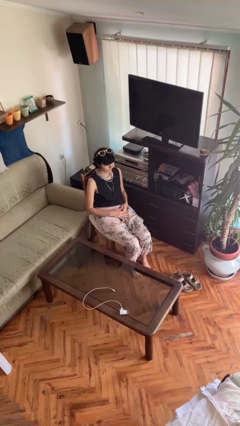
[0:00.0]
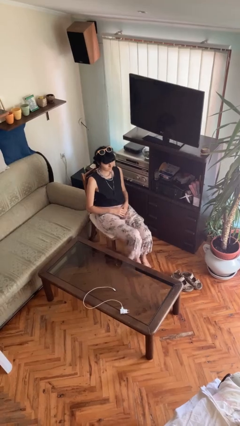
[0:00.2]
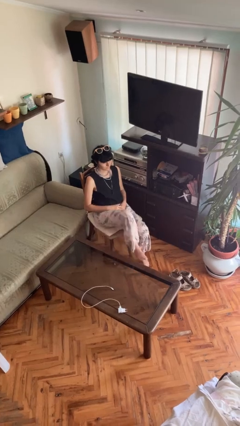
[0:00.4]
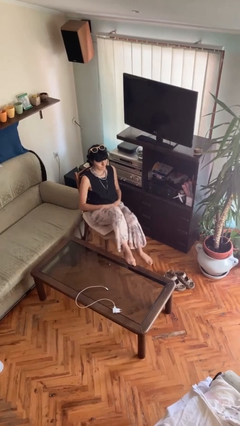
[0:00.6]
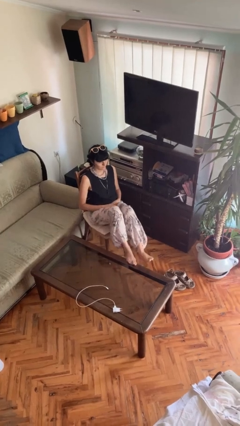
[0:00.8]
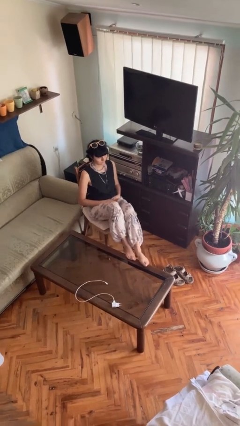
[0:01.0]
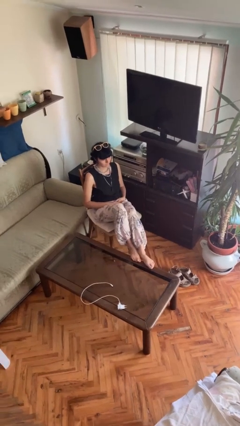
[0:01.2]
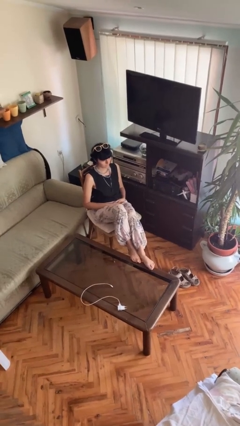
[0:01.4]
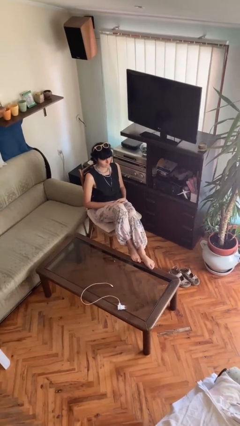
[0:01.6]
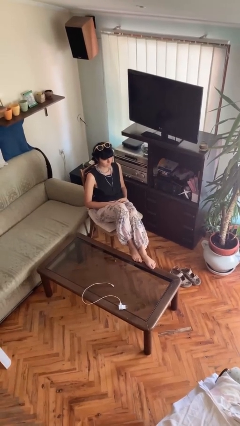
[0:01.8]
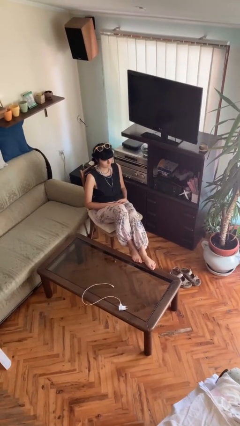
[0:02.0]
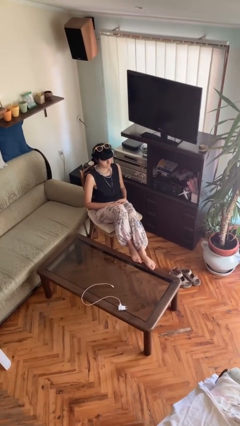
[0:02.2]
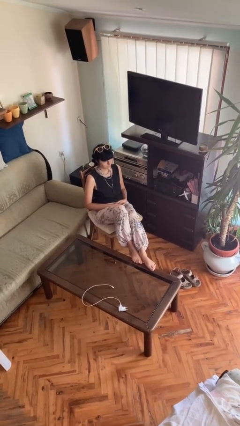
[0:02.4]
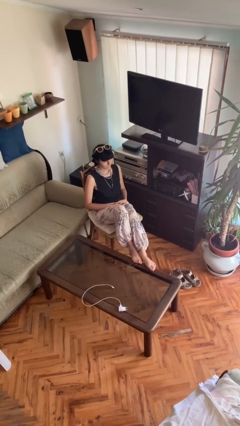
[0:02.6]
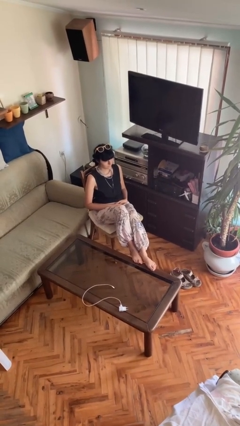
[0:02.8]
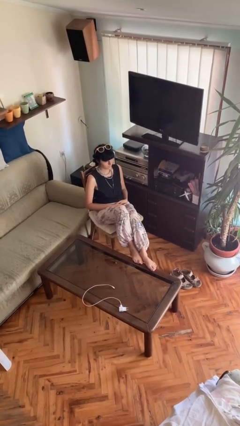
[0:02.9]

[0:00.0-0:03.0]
person puts feet up

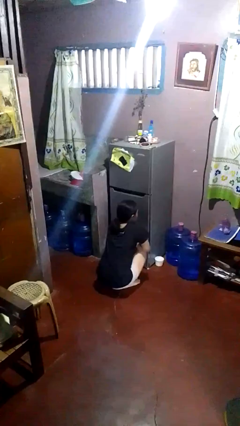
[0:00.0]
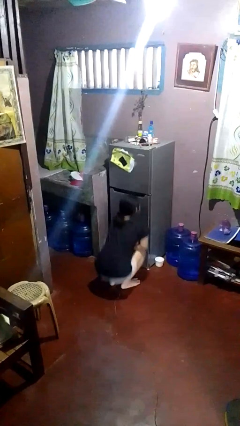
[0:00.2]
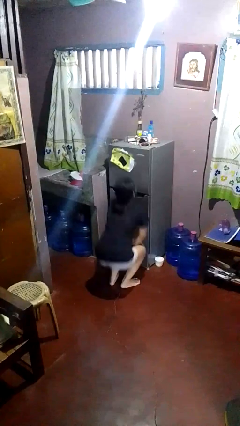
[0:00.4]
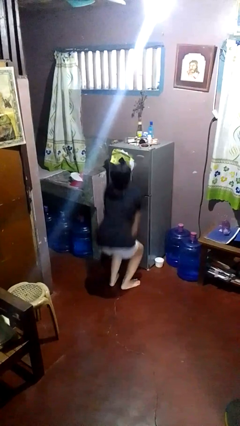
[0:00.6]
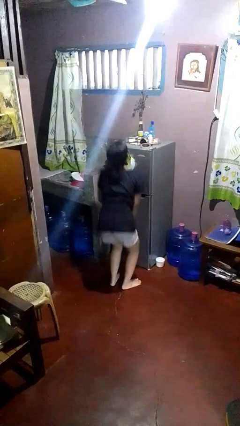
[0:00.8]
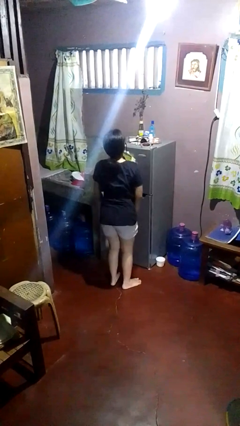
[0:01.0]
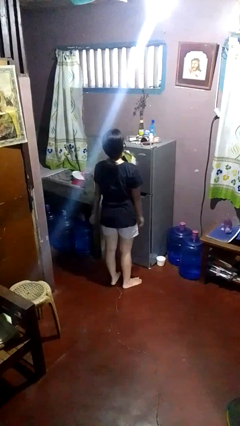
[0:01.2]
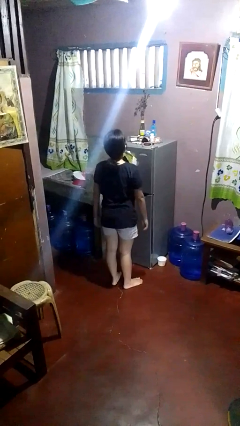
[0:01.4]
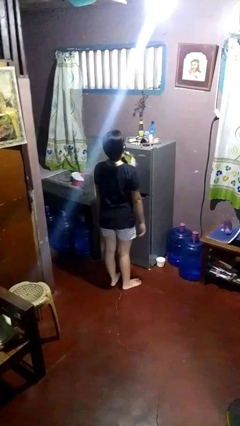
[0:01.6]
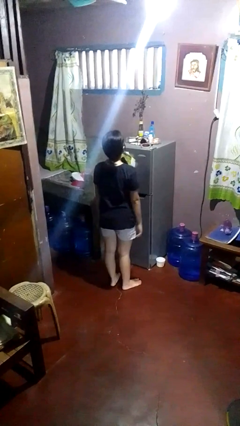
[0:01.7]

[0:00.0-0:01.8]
person stands up

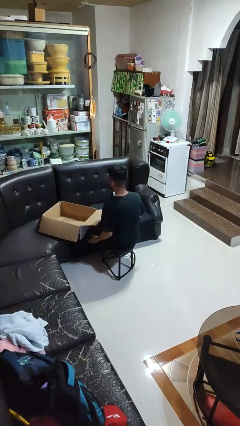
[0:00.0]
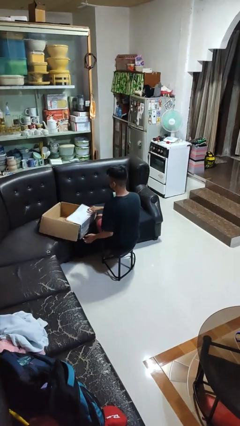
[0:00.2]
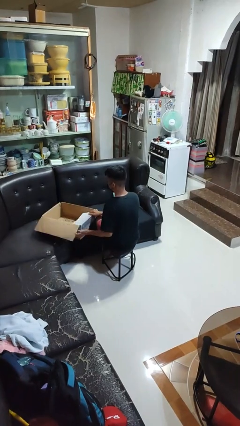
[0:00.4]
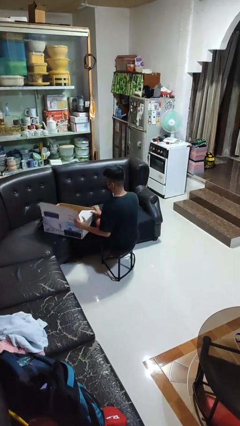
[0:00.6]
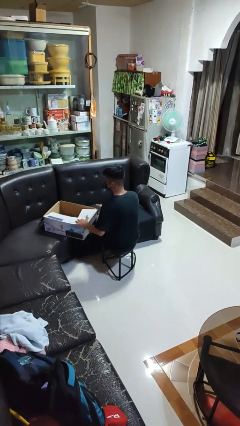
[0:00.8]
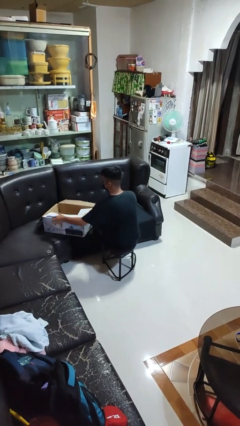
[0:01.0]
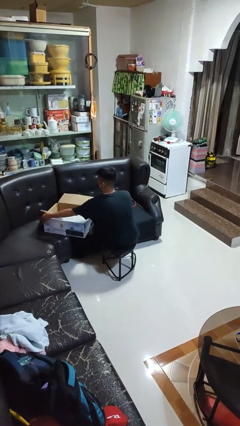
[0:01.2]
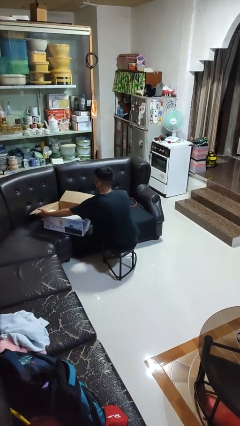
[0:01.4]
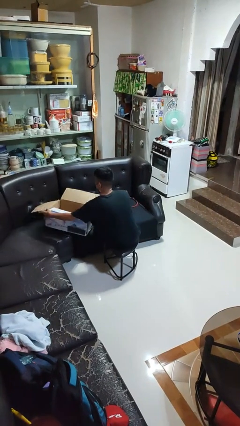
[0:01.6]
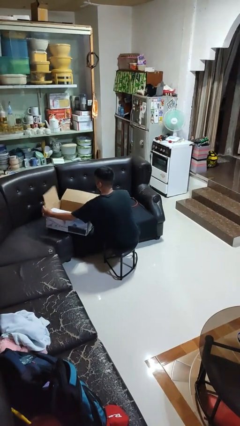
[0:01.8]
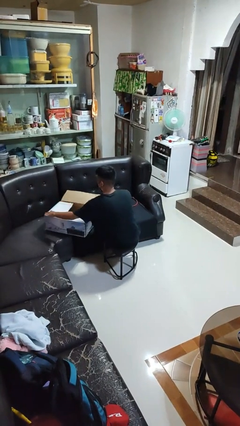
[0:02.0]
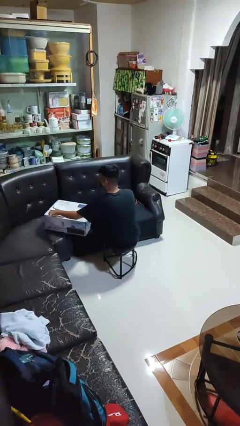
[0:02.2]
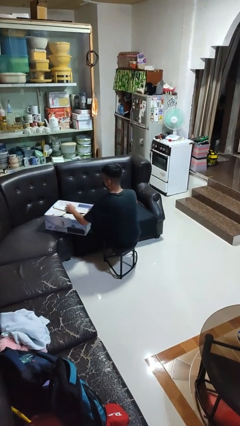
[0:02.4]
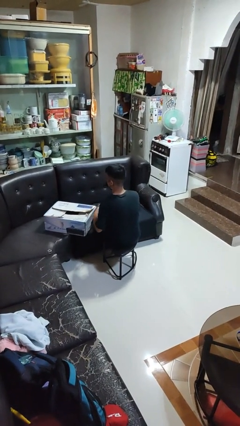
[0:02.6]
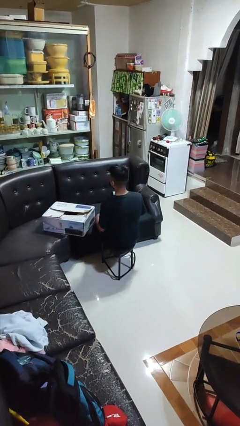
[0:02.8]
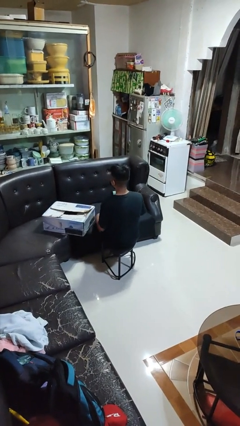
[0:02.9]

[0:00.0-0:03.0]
person closes box

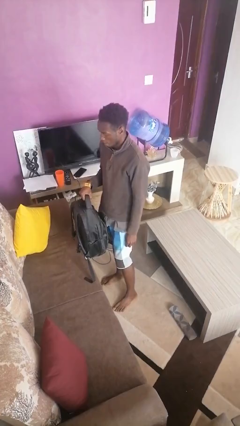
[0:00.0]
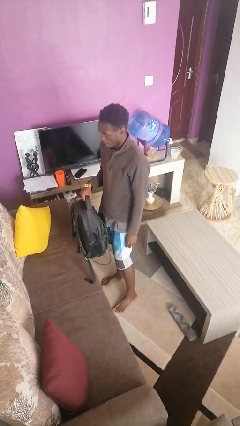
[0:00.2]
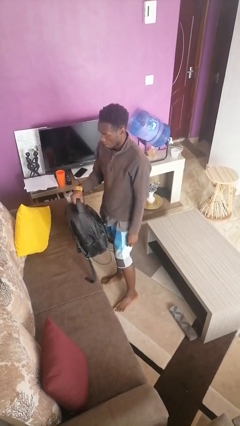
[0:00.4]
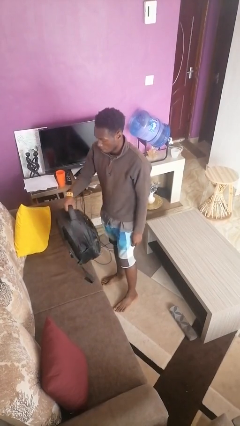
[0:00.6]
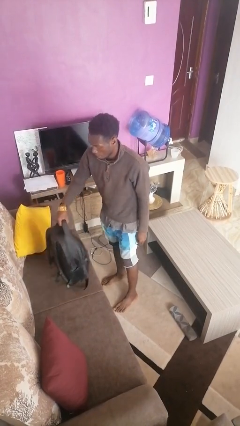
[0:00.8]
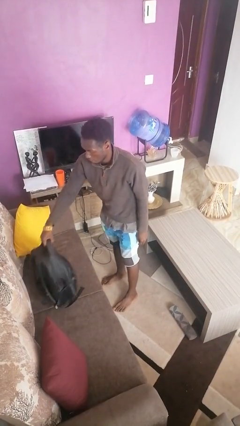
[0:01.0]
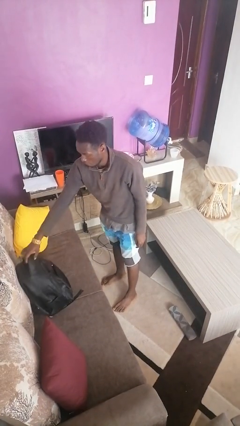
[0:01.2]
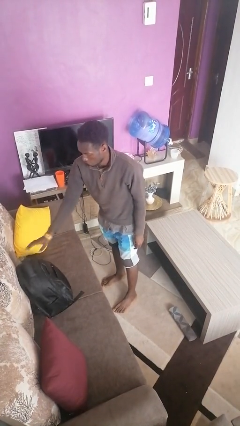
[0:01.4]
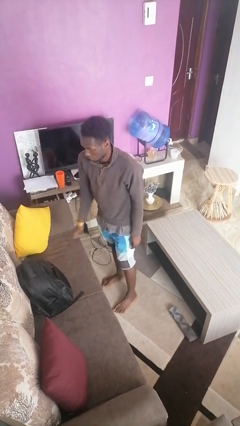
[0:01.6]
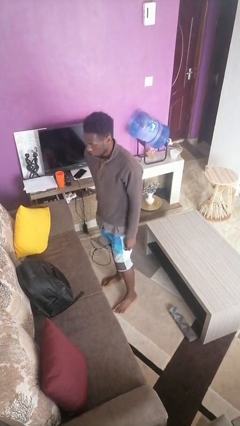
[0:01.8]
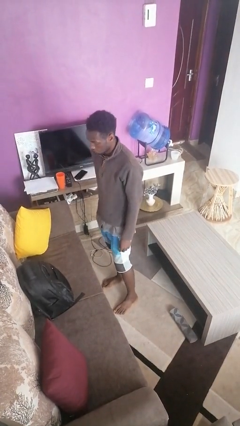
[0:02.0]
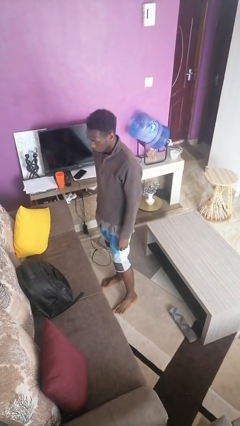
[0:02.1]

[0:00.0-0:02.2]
person puts down object on couch

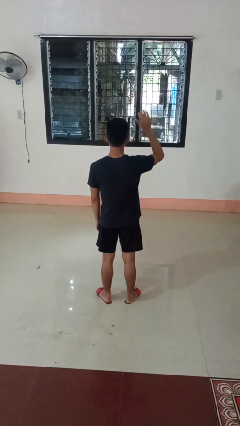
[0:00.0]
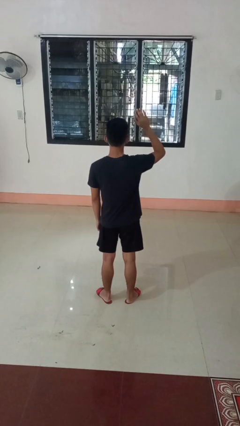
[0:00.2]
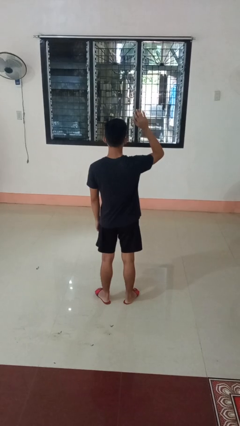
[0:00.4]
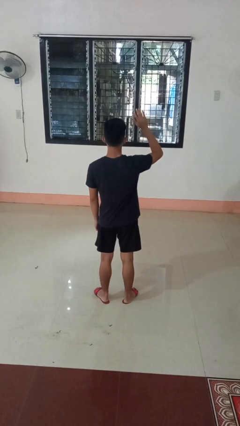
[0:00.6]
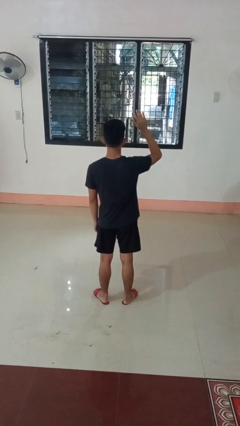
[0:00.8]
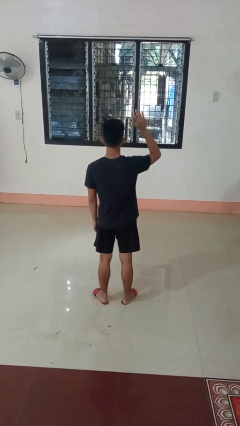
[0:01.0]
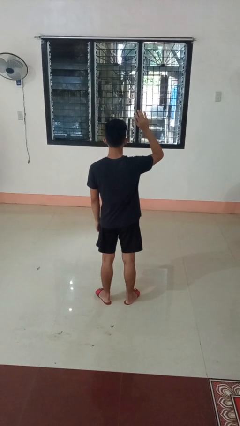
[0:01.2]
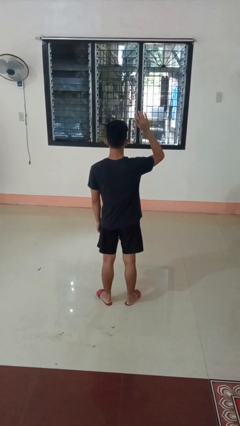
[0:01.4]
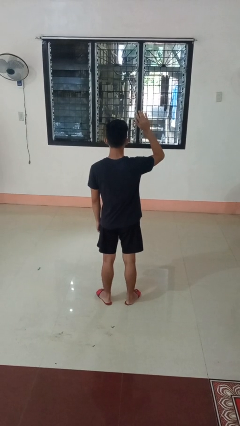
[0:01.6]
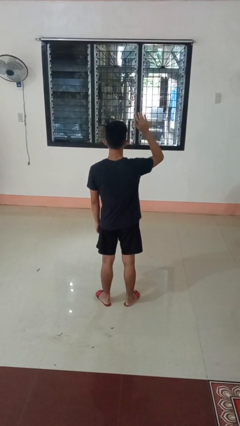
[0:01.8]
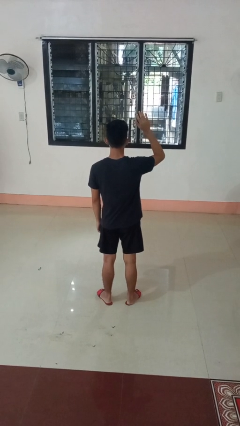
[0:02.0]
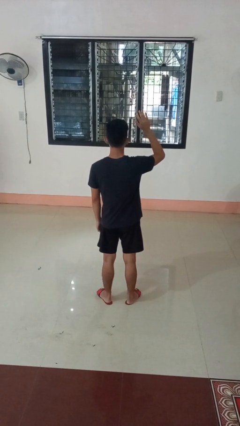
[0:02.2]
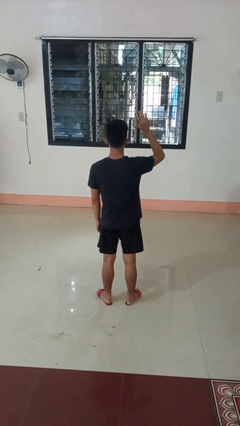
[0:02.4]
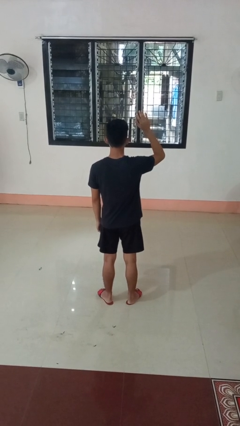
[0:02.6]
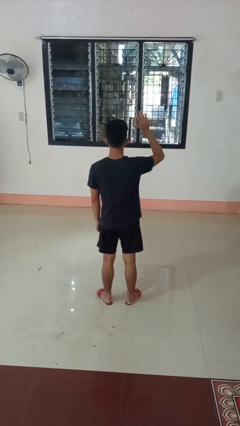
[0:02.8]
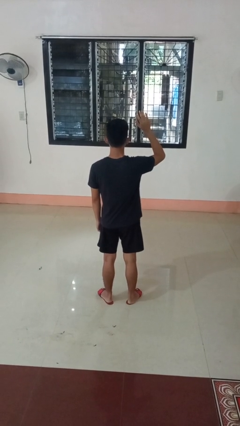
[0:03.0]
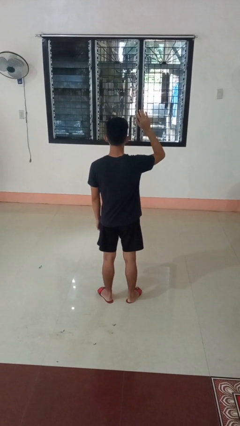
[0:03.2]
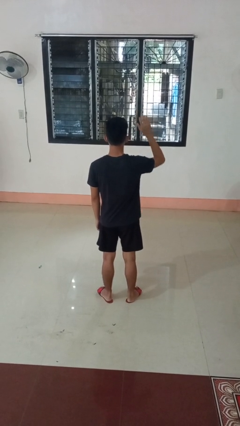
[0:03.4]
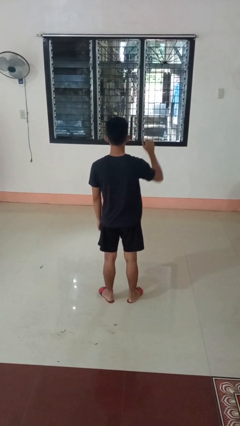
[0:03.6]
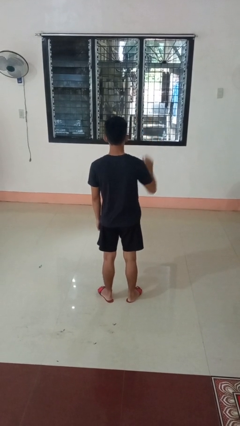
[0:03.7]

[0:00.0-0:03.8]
person gestures raise hand

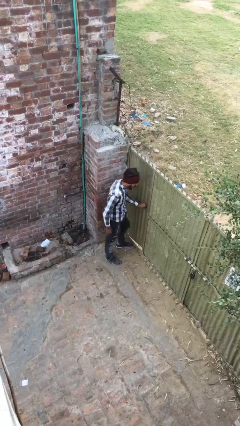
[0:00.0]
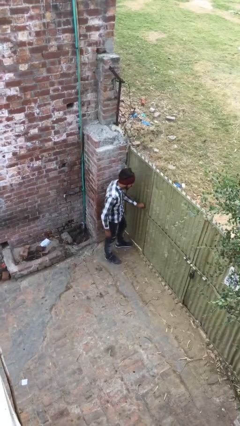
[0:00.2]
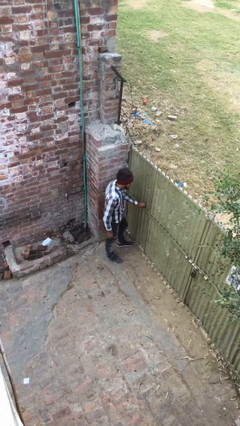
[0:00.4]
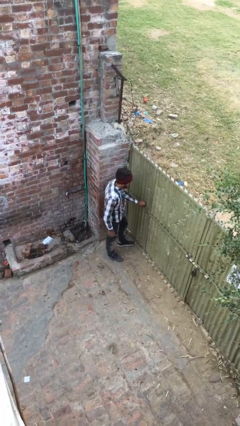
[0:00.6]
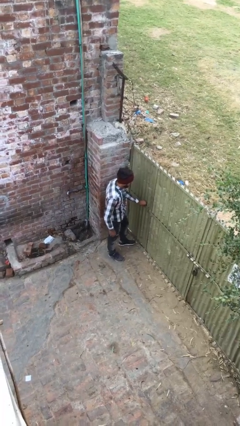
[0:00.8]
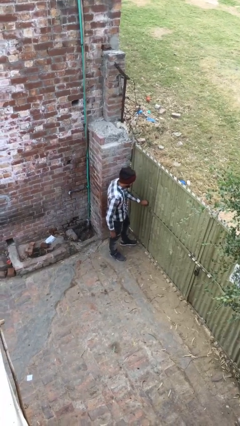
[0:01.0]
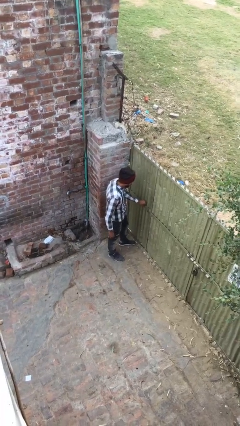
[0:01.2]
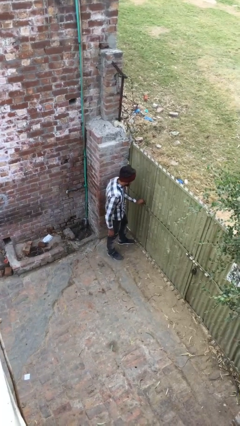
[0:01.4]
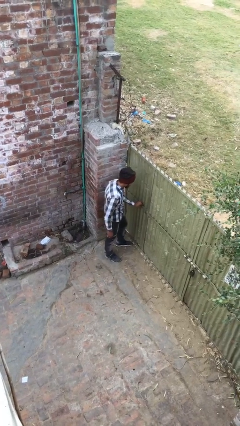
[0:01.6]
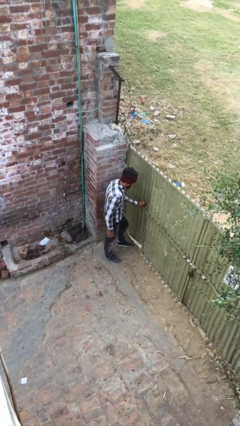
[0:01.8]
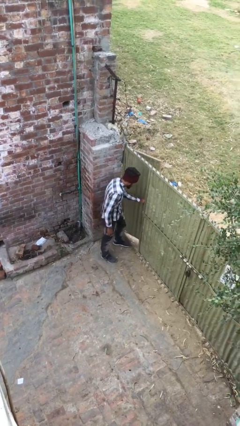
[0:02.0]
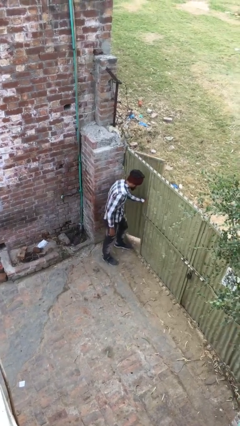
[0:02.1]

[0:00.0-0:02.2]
person closes facility door

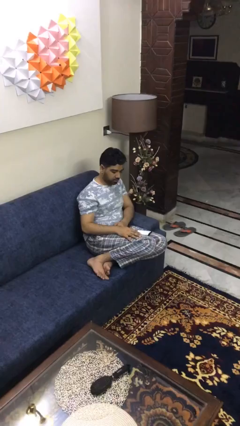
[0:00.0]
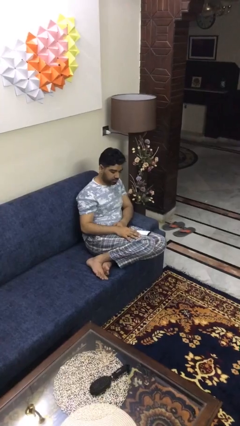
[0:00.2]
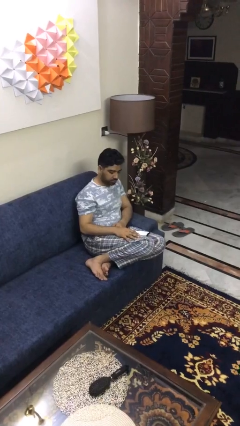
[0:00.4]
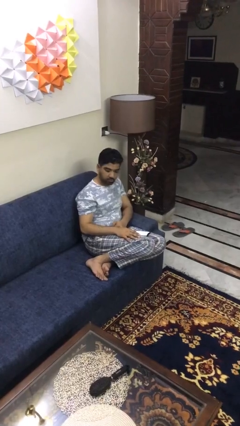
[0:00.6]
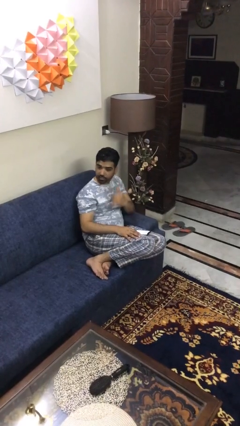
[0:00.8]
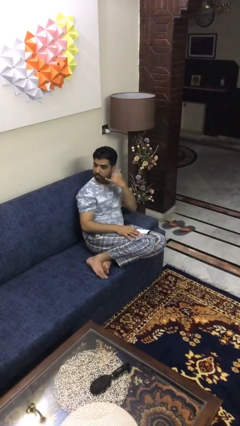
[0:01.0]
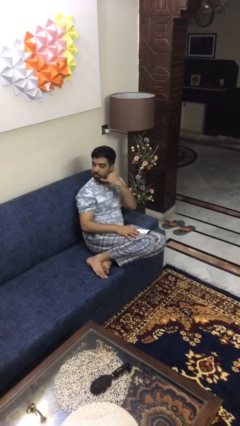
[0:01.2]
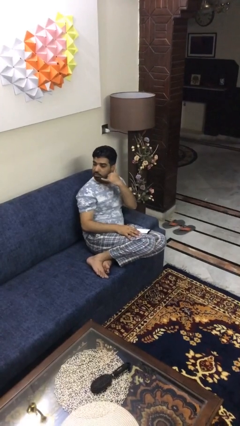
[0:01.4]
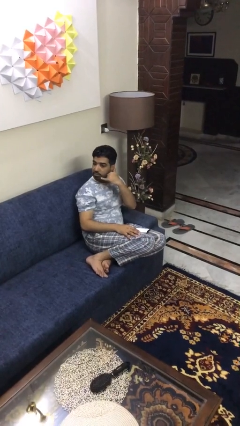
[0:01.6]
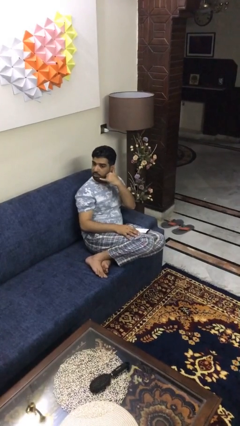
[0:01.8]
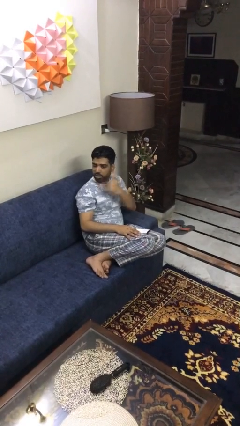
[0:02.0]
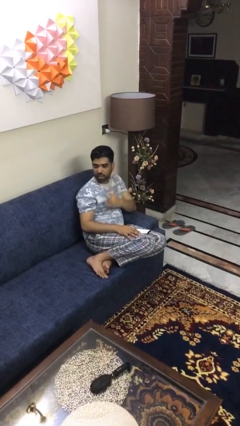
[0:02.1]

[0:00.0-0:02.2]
person gestures call me
